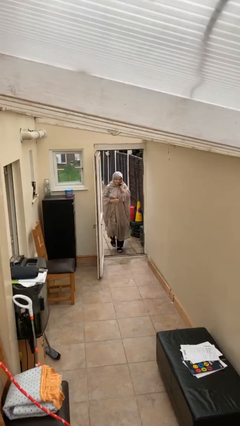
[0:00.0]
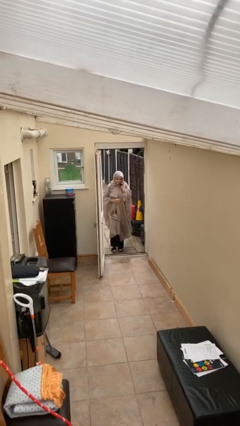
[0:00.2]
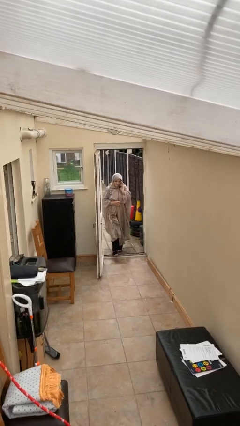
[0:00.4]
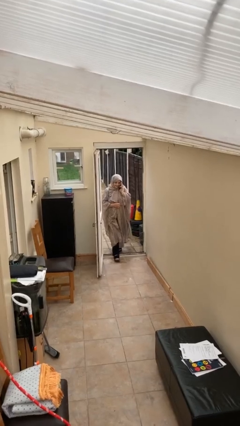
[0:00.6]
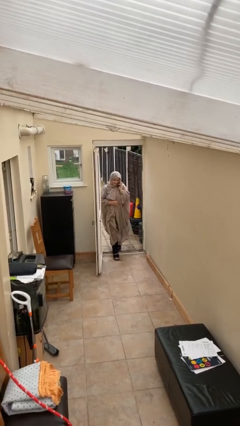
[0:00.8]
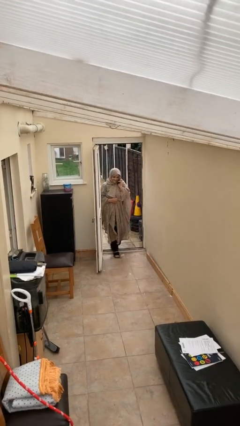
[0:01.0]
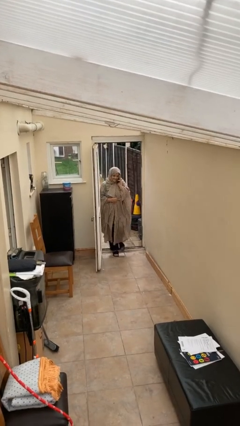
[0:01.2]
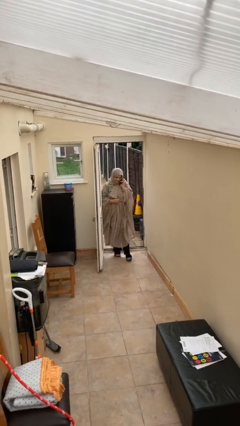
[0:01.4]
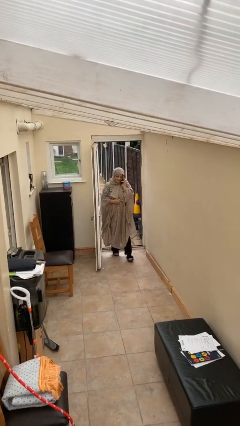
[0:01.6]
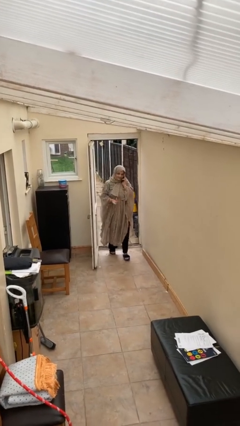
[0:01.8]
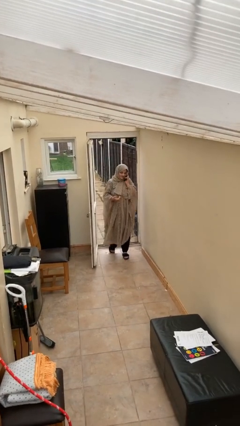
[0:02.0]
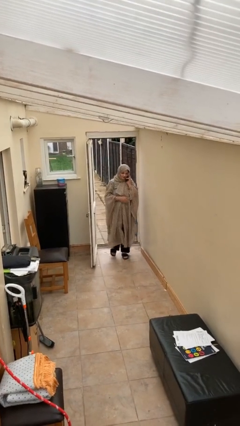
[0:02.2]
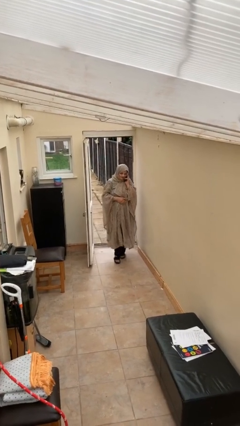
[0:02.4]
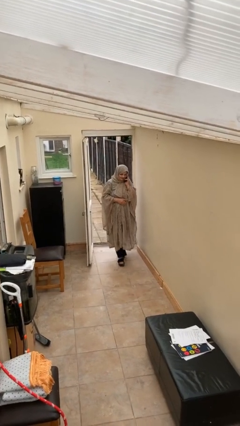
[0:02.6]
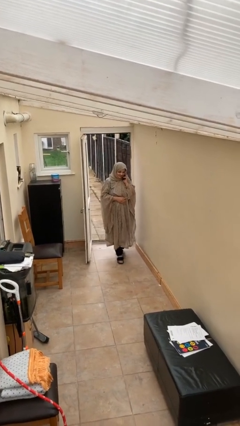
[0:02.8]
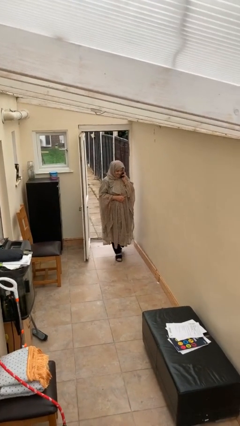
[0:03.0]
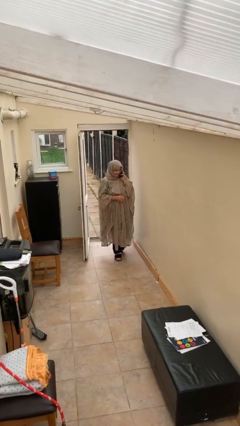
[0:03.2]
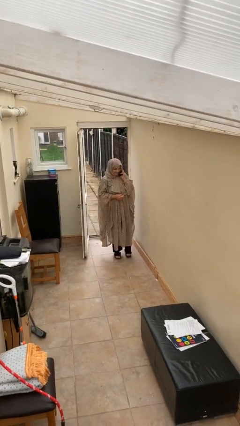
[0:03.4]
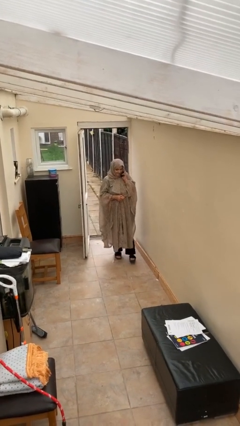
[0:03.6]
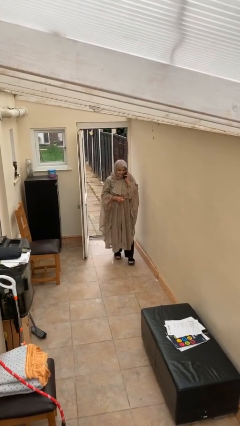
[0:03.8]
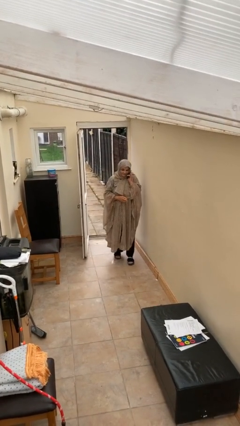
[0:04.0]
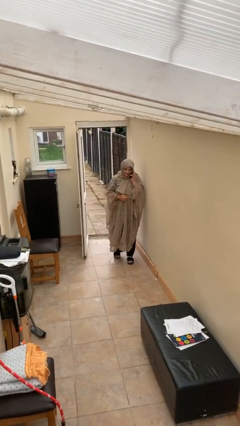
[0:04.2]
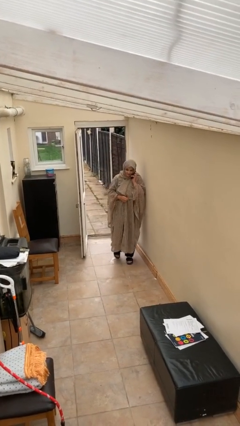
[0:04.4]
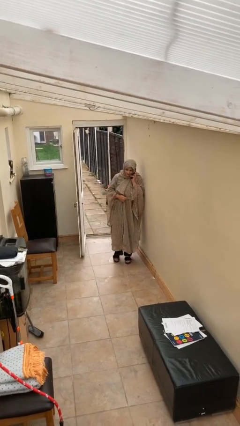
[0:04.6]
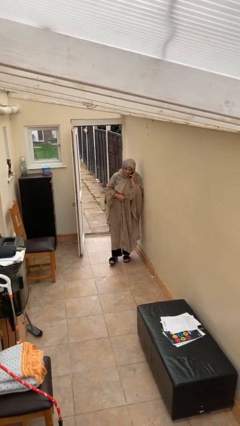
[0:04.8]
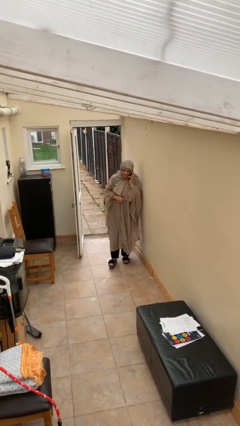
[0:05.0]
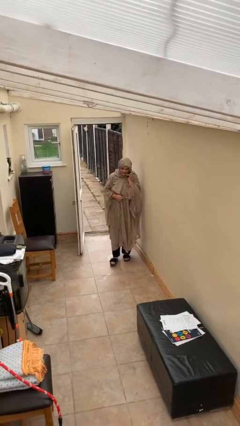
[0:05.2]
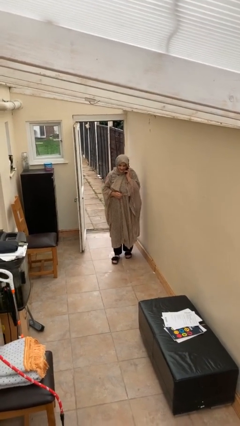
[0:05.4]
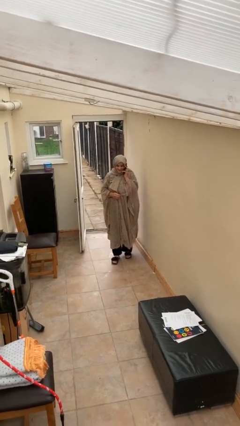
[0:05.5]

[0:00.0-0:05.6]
person enters scene through structure

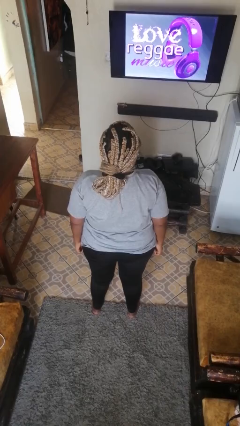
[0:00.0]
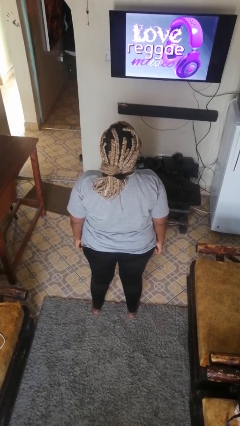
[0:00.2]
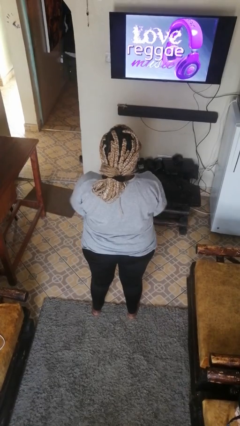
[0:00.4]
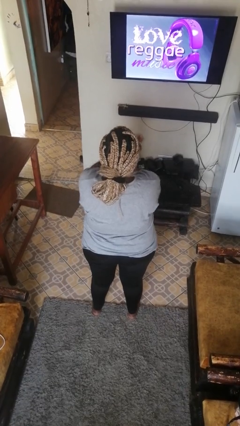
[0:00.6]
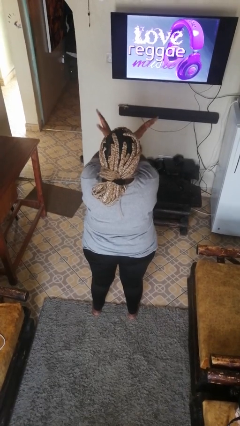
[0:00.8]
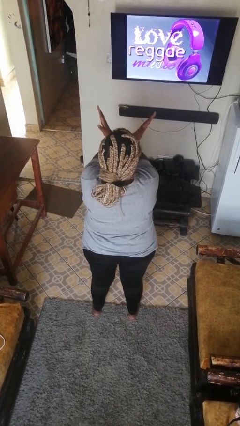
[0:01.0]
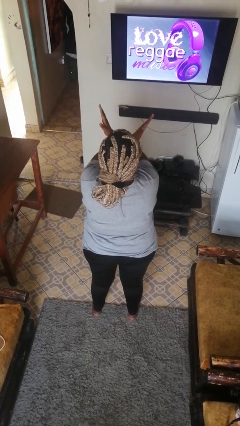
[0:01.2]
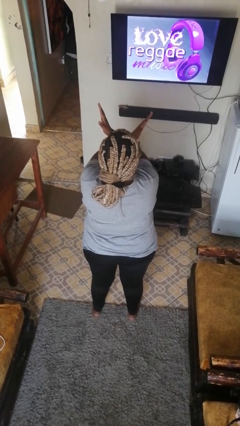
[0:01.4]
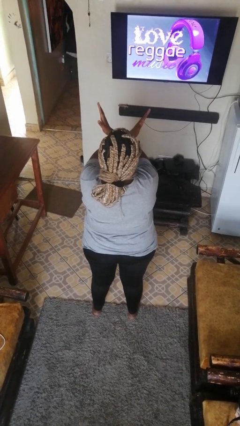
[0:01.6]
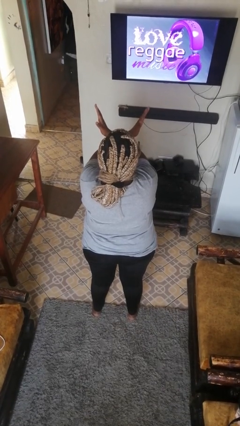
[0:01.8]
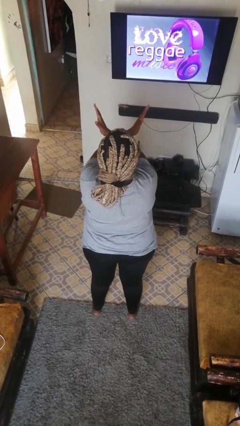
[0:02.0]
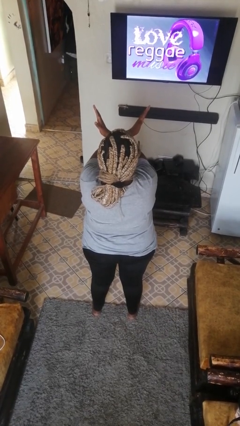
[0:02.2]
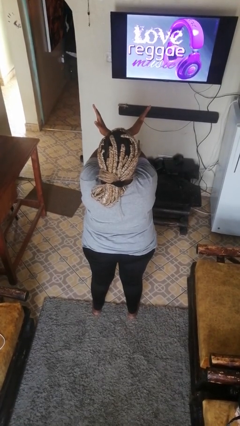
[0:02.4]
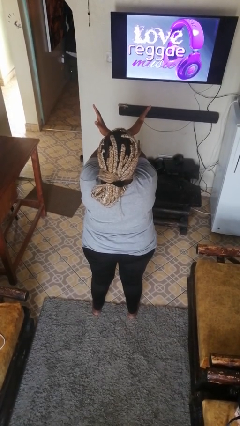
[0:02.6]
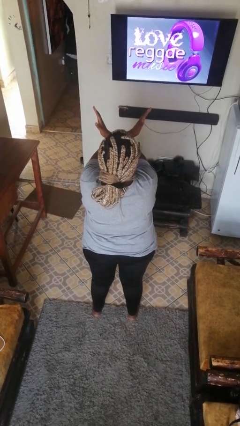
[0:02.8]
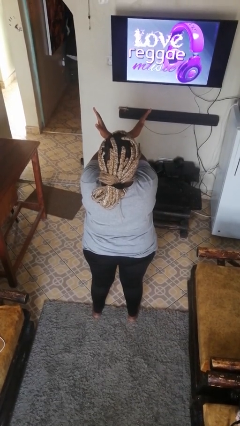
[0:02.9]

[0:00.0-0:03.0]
person gestures arms x

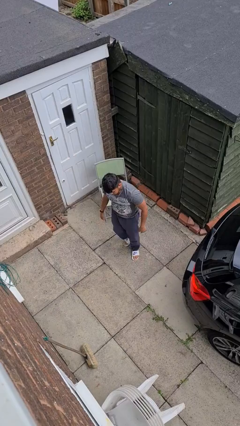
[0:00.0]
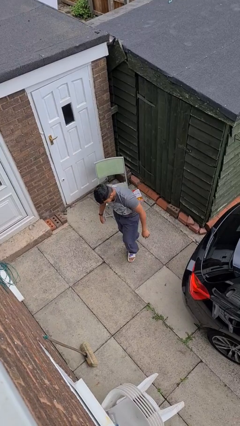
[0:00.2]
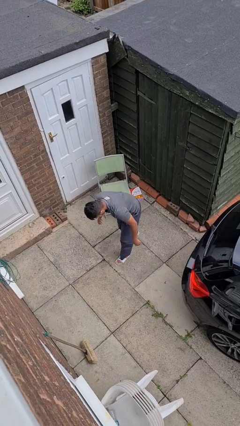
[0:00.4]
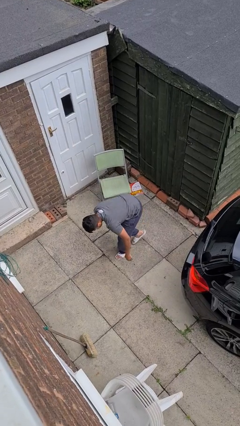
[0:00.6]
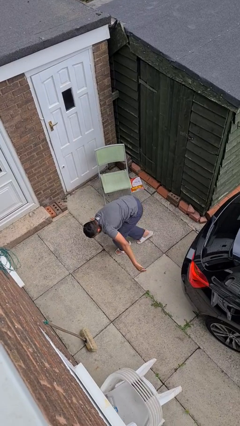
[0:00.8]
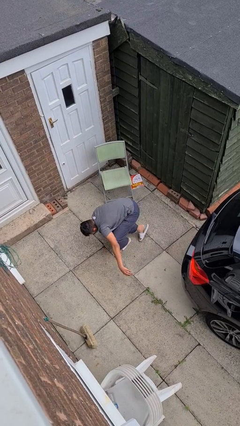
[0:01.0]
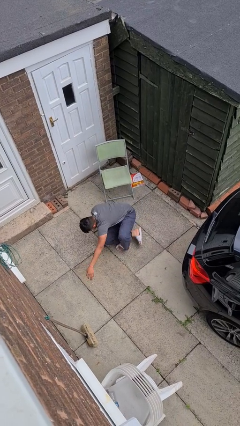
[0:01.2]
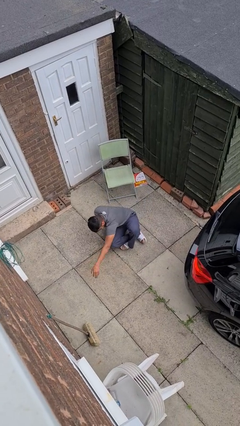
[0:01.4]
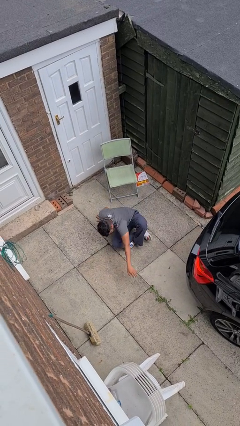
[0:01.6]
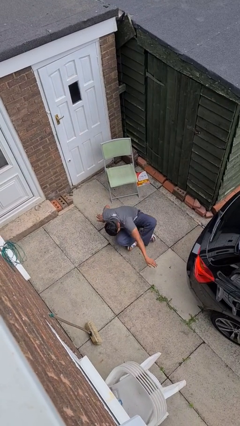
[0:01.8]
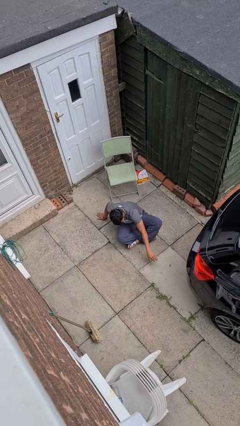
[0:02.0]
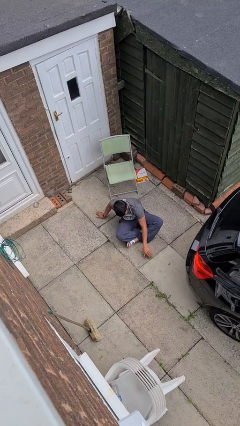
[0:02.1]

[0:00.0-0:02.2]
person sits crisscross

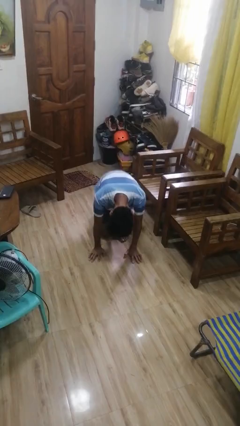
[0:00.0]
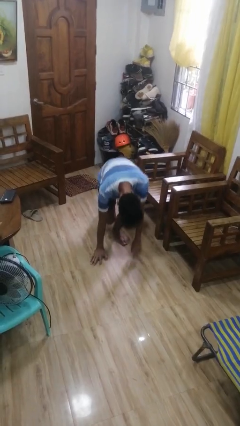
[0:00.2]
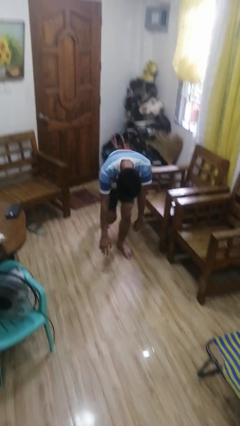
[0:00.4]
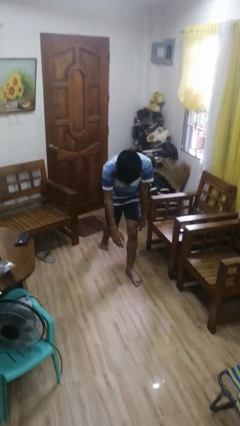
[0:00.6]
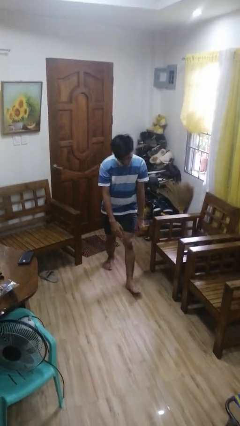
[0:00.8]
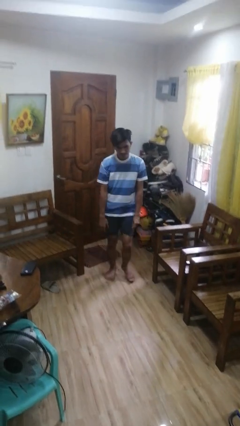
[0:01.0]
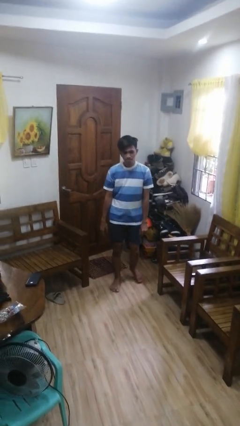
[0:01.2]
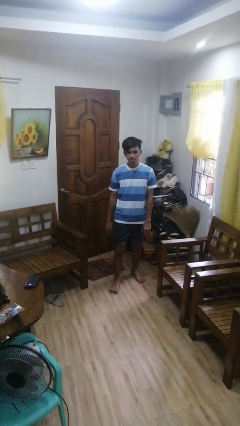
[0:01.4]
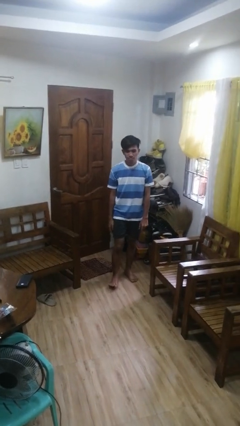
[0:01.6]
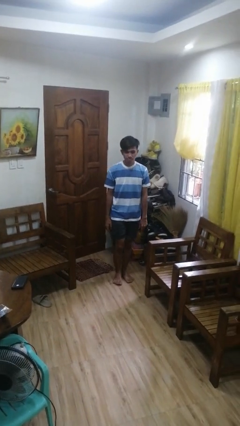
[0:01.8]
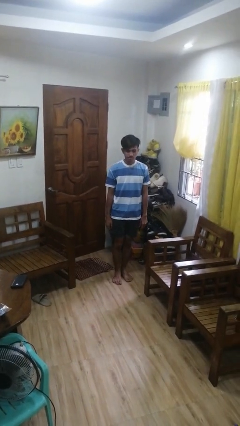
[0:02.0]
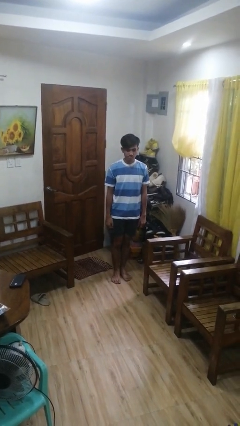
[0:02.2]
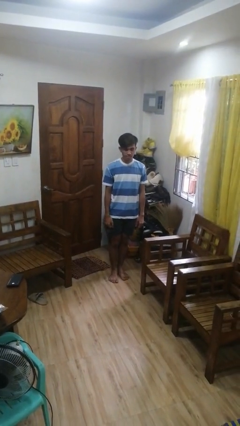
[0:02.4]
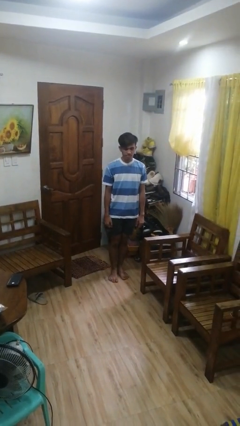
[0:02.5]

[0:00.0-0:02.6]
person stands up from floor

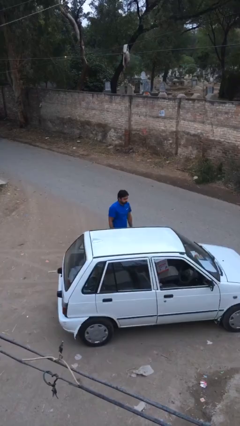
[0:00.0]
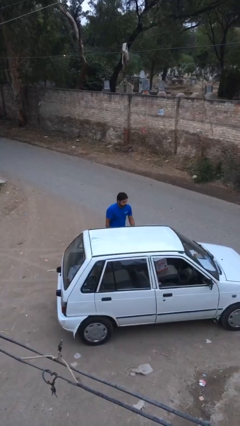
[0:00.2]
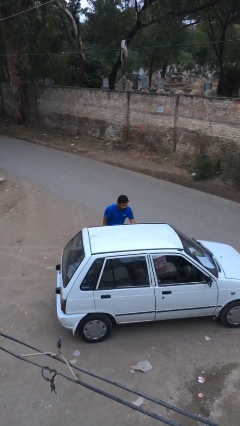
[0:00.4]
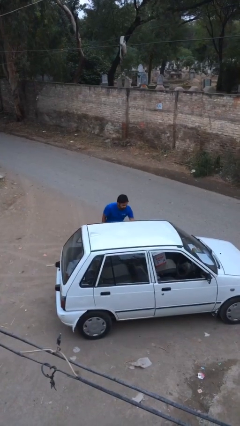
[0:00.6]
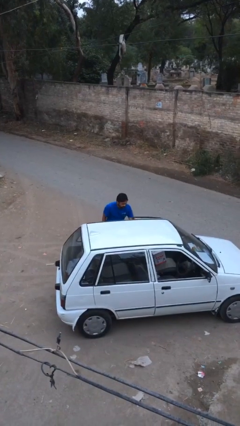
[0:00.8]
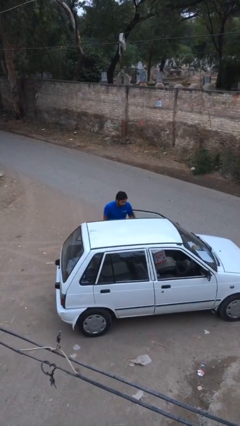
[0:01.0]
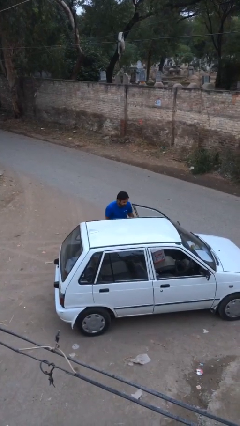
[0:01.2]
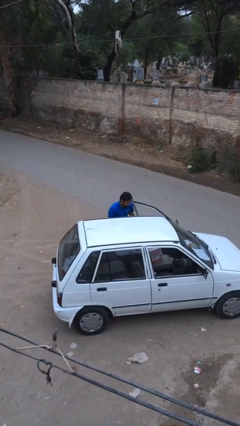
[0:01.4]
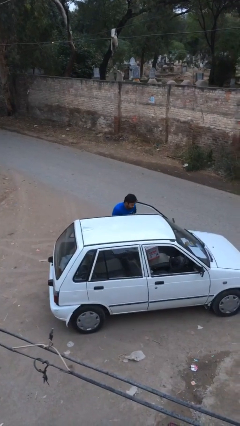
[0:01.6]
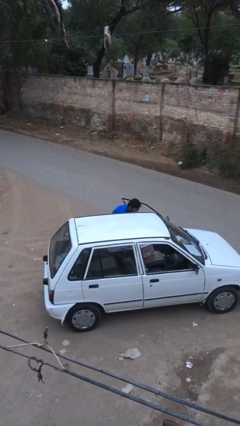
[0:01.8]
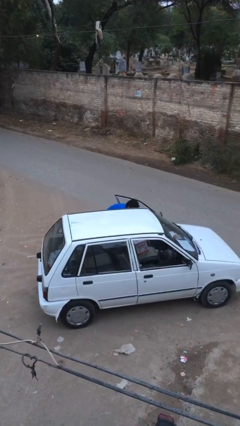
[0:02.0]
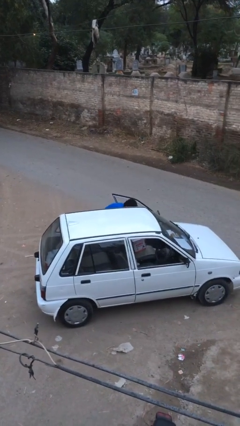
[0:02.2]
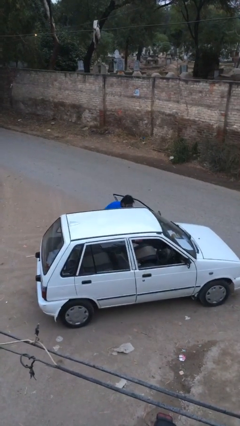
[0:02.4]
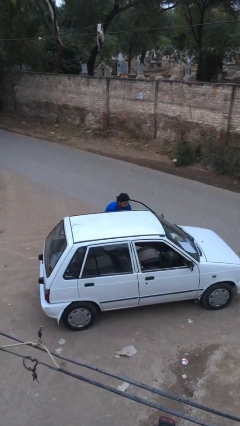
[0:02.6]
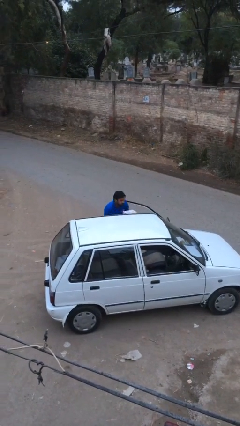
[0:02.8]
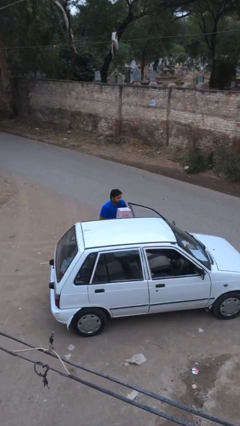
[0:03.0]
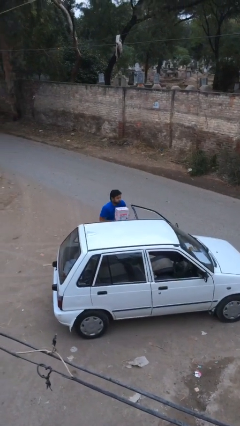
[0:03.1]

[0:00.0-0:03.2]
person unloads car

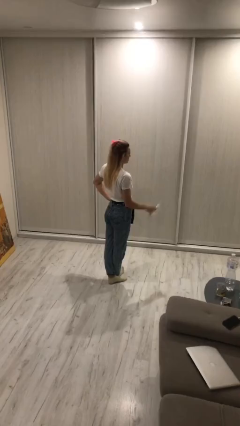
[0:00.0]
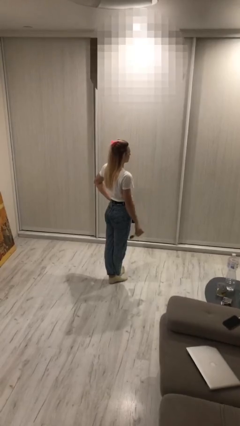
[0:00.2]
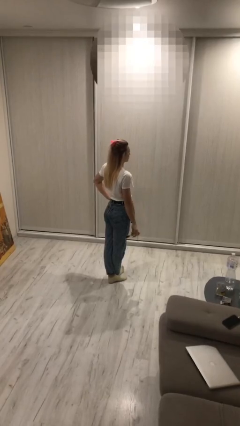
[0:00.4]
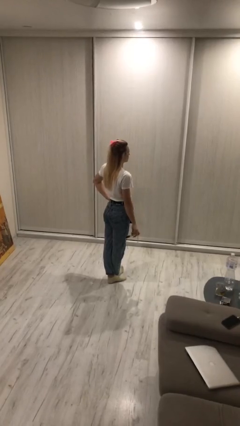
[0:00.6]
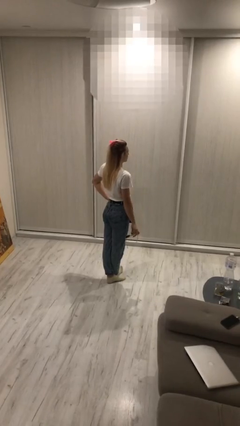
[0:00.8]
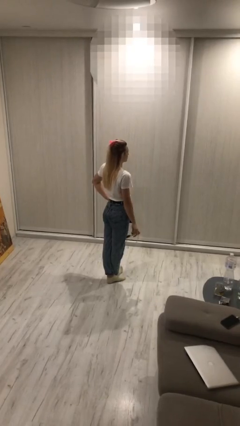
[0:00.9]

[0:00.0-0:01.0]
person takes off sunglasses
